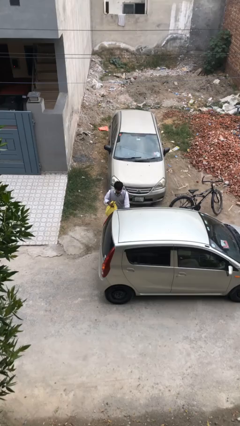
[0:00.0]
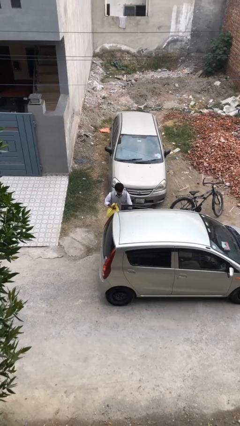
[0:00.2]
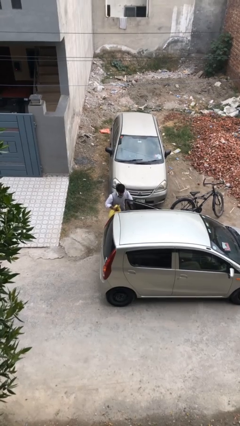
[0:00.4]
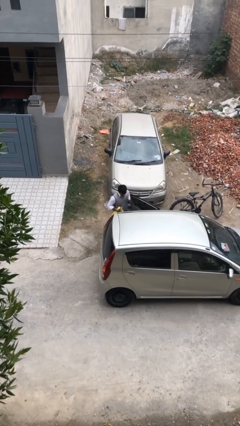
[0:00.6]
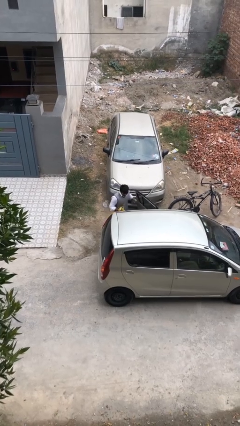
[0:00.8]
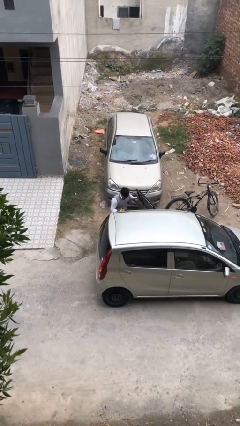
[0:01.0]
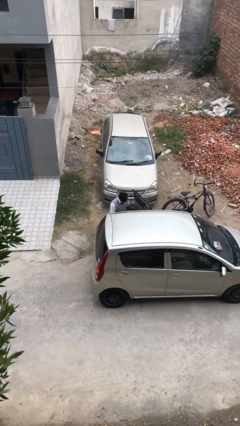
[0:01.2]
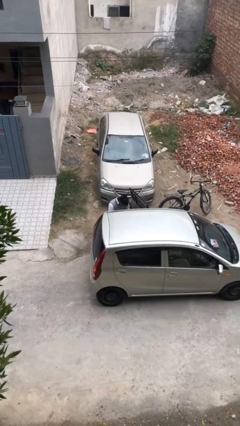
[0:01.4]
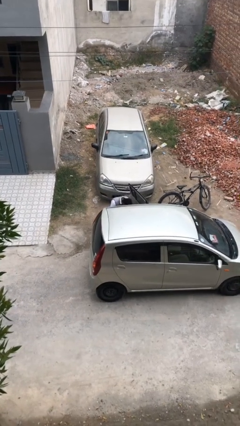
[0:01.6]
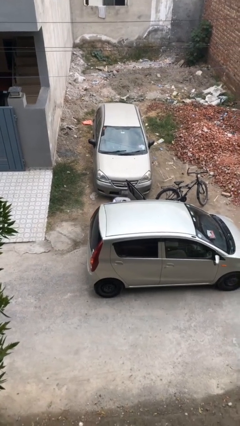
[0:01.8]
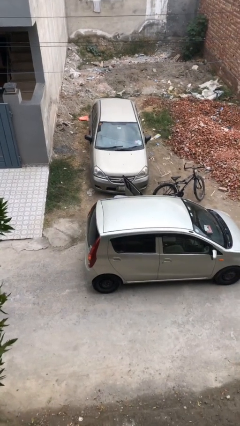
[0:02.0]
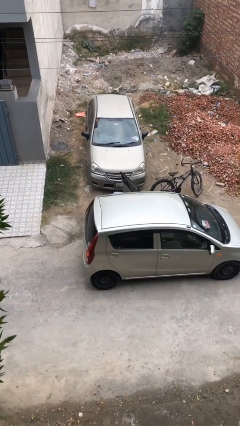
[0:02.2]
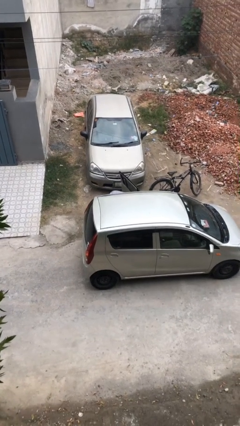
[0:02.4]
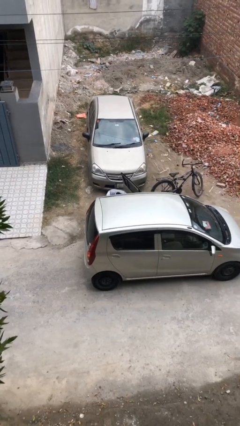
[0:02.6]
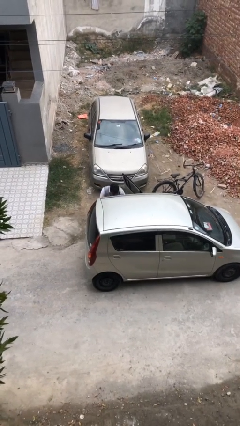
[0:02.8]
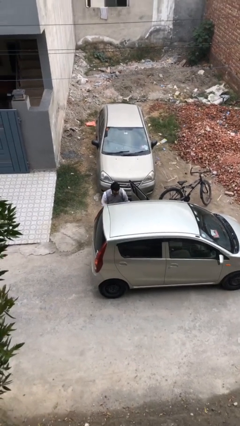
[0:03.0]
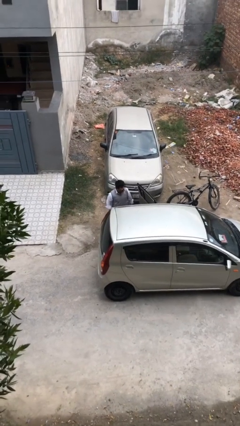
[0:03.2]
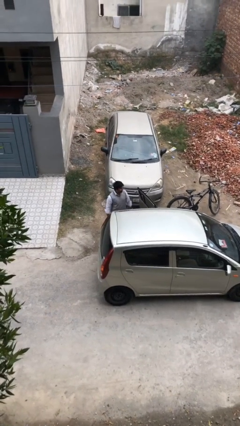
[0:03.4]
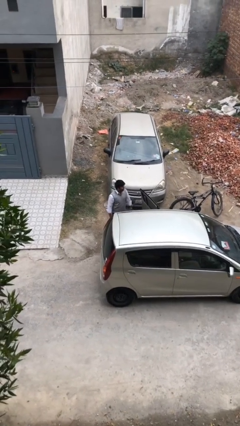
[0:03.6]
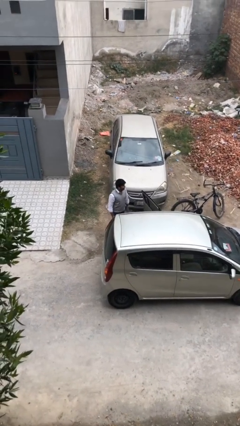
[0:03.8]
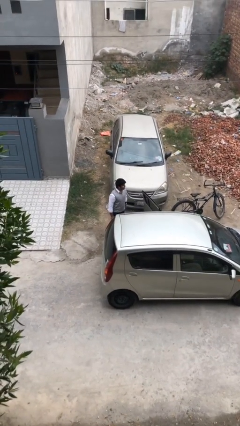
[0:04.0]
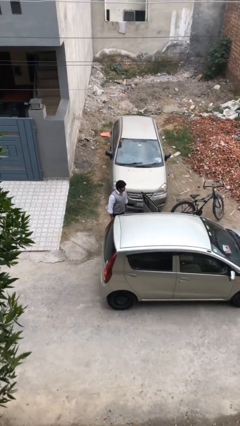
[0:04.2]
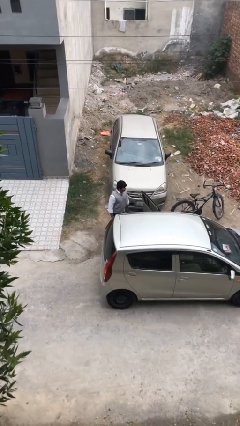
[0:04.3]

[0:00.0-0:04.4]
person loads car

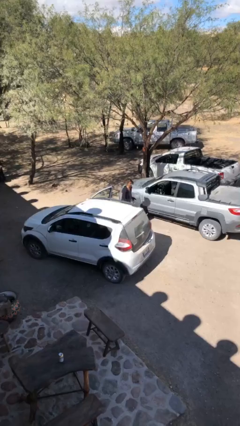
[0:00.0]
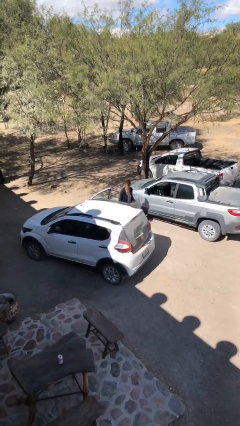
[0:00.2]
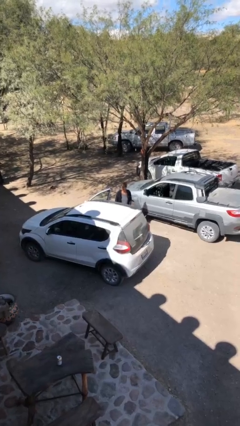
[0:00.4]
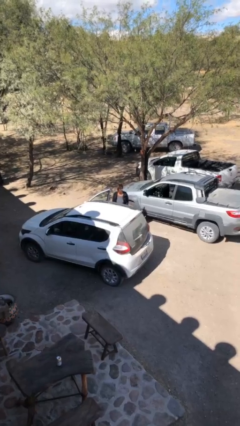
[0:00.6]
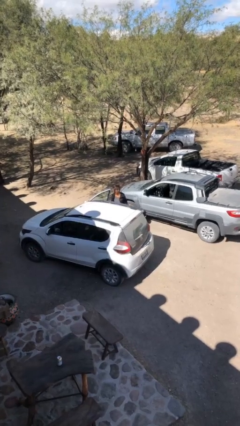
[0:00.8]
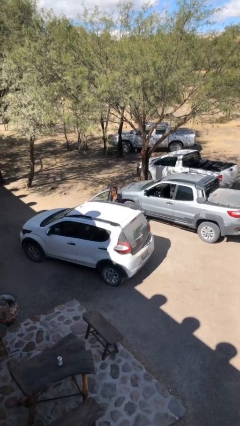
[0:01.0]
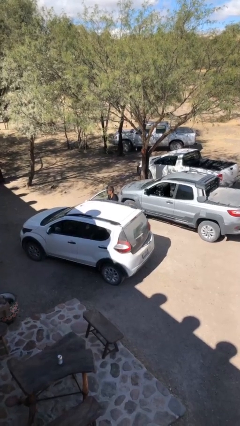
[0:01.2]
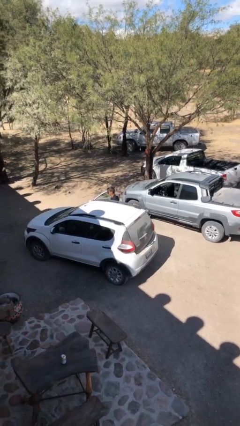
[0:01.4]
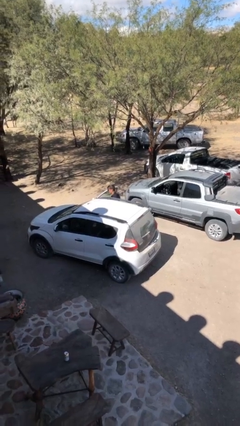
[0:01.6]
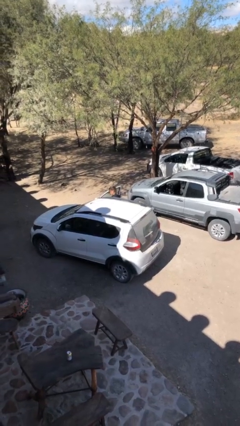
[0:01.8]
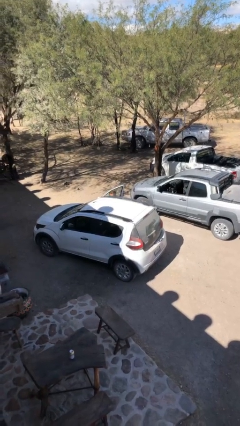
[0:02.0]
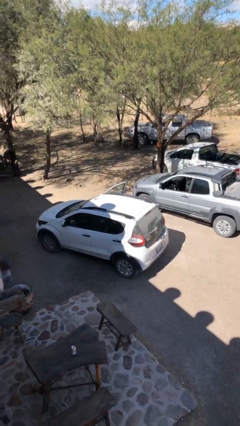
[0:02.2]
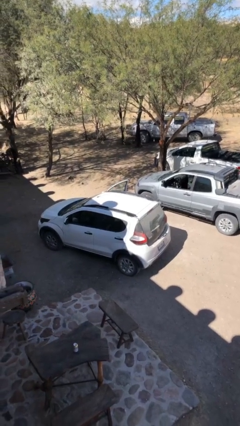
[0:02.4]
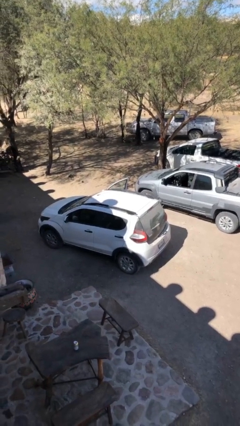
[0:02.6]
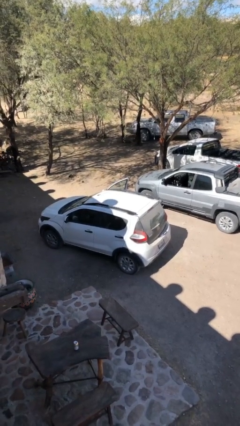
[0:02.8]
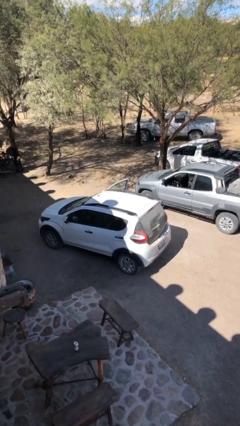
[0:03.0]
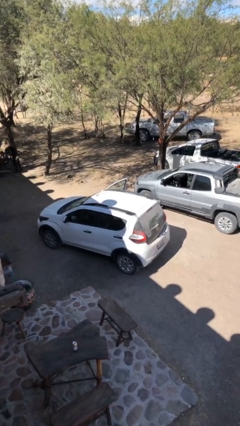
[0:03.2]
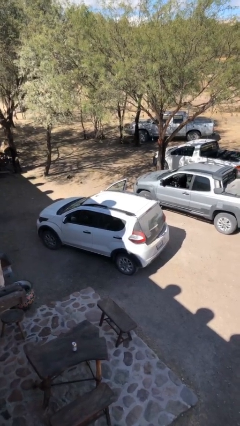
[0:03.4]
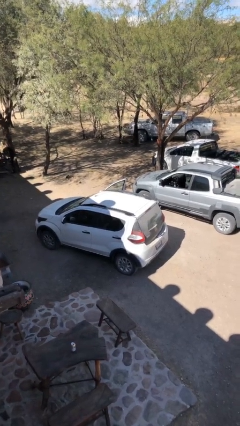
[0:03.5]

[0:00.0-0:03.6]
person enters car

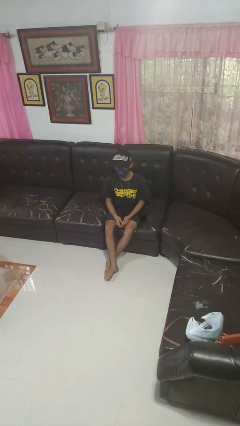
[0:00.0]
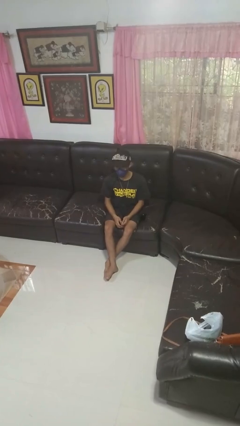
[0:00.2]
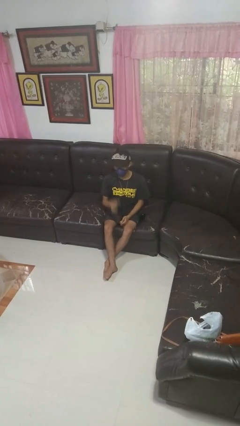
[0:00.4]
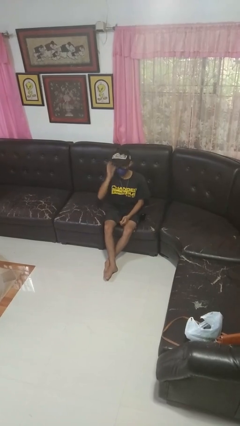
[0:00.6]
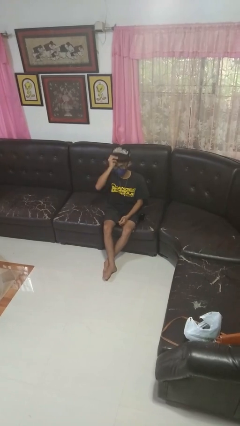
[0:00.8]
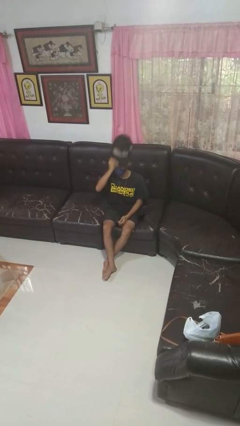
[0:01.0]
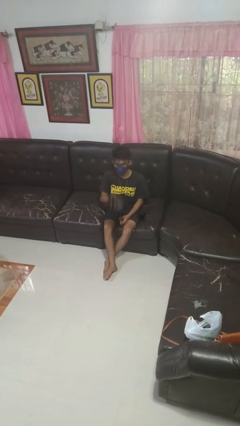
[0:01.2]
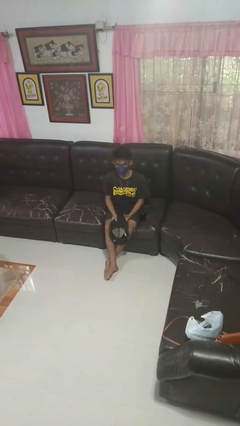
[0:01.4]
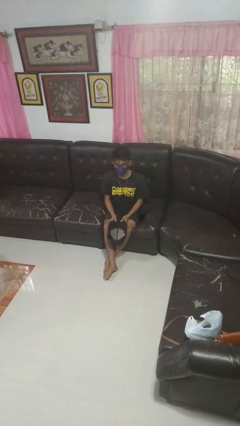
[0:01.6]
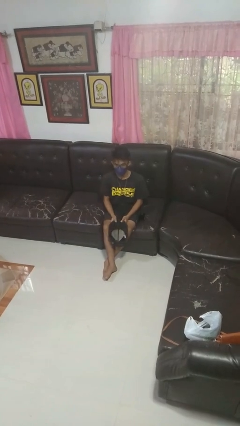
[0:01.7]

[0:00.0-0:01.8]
person takes off hat

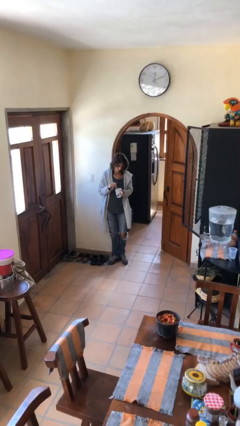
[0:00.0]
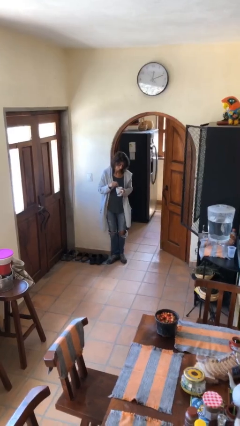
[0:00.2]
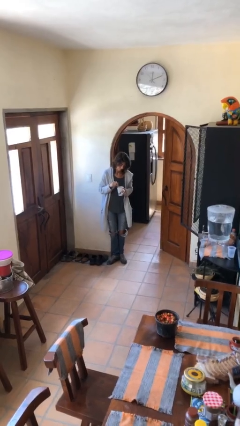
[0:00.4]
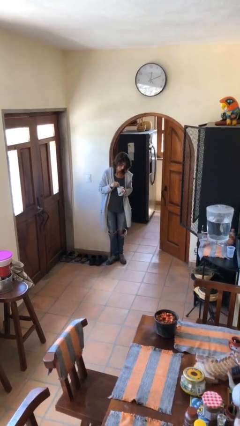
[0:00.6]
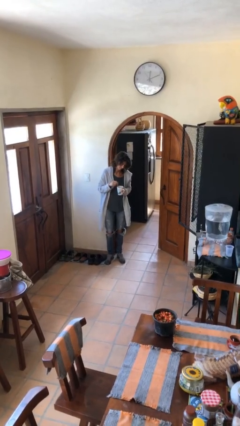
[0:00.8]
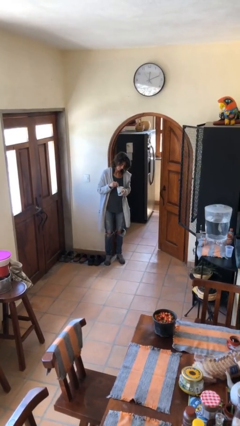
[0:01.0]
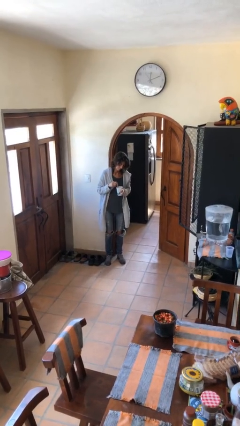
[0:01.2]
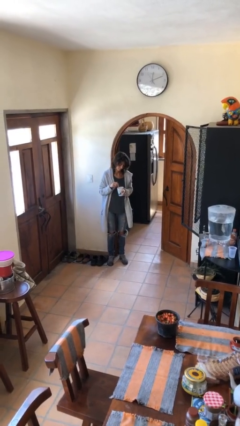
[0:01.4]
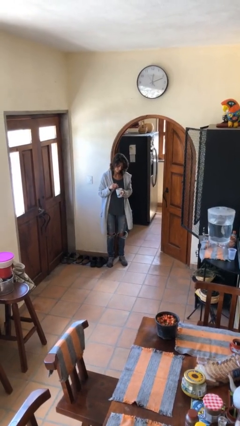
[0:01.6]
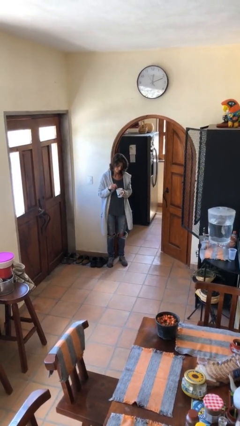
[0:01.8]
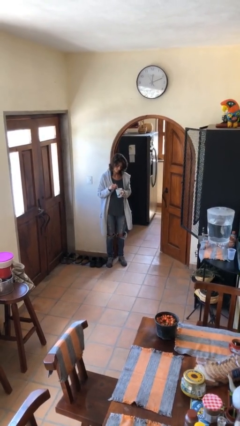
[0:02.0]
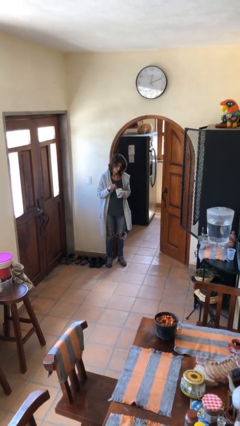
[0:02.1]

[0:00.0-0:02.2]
person stirs mug

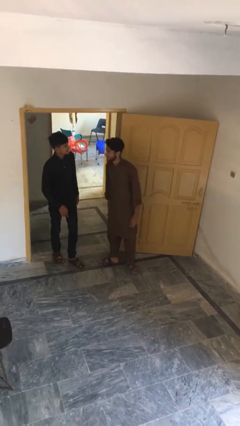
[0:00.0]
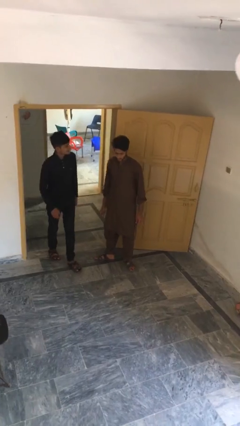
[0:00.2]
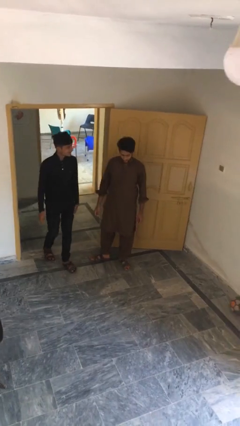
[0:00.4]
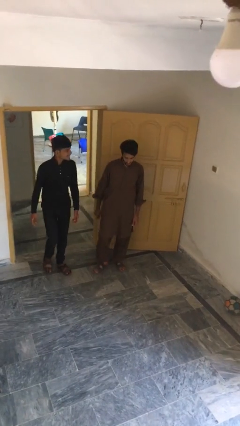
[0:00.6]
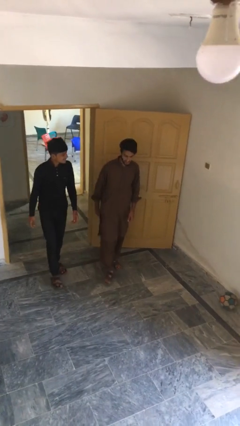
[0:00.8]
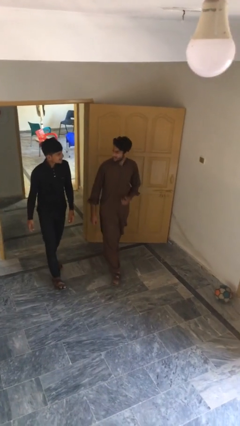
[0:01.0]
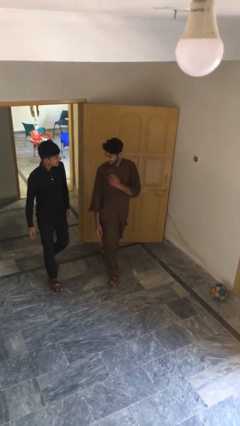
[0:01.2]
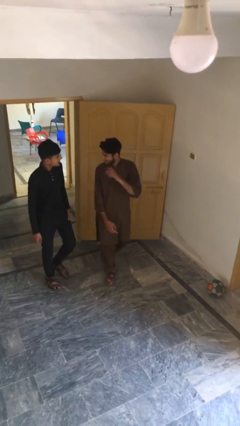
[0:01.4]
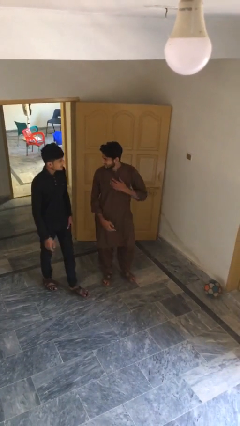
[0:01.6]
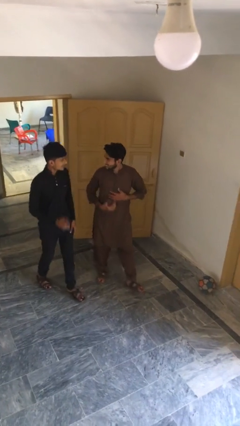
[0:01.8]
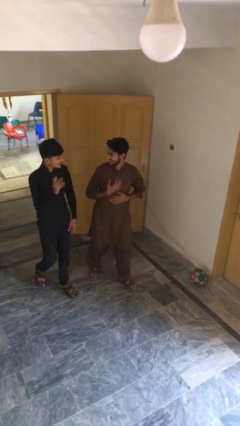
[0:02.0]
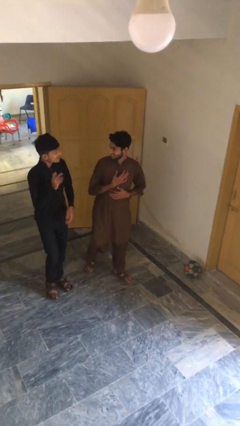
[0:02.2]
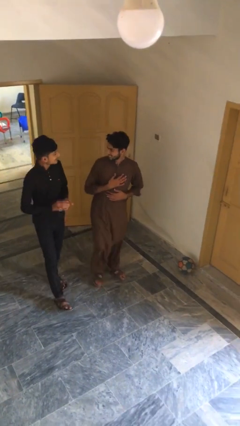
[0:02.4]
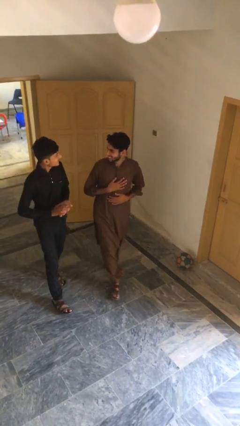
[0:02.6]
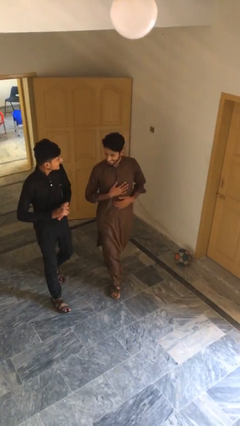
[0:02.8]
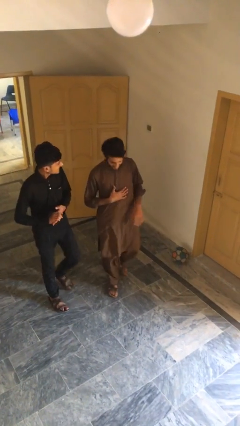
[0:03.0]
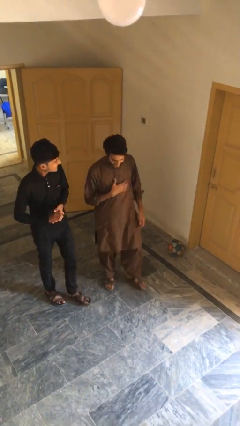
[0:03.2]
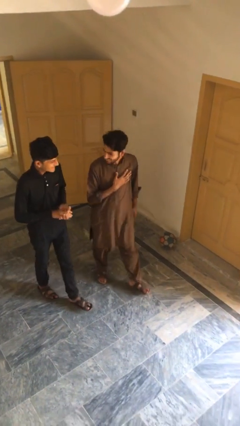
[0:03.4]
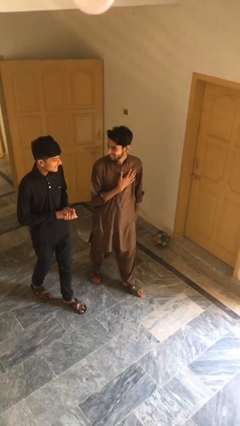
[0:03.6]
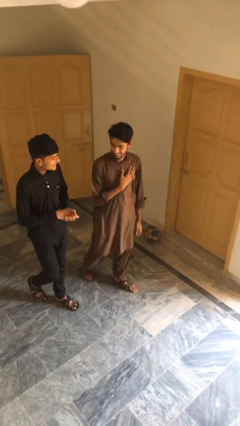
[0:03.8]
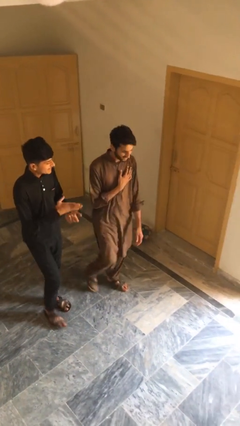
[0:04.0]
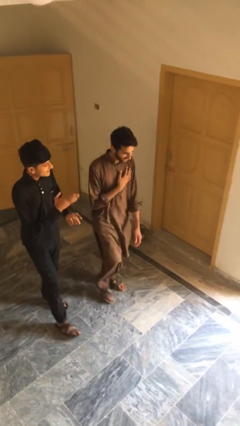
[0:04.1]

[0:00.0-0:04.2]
person talks to person

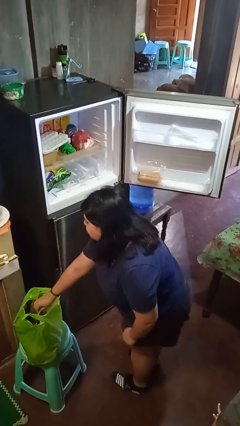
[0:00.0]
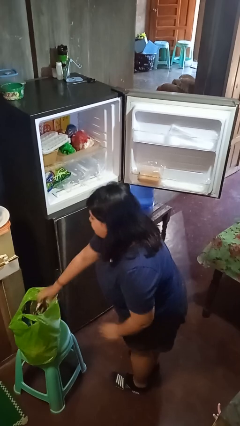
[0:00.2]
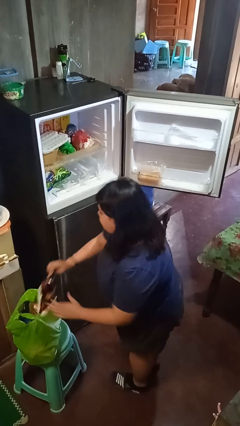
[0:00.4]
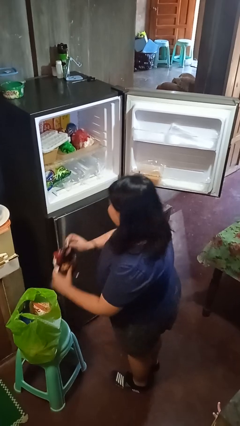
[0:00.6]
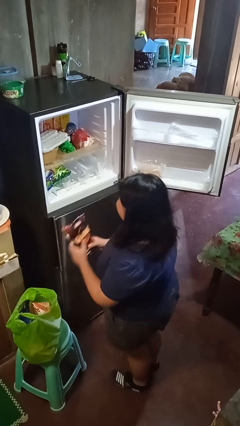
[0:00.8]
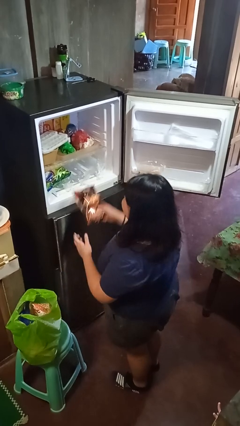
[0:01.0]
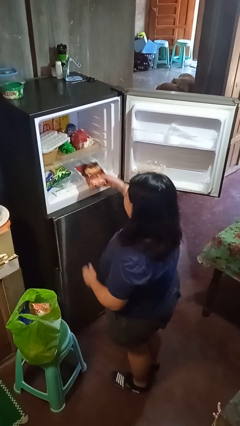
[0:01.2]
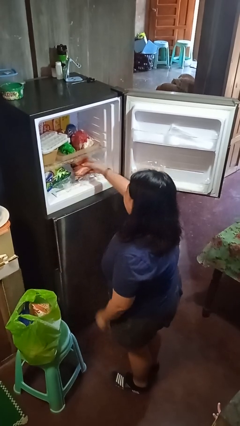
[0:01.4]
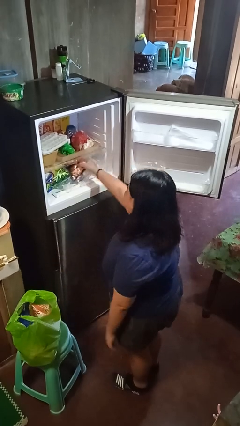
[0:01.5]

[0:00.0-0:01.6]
person loads groceries into refrigerator
